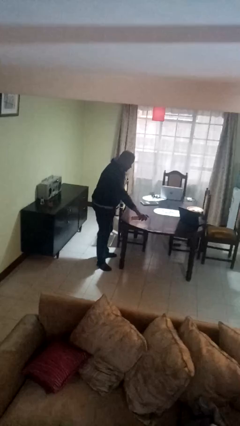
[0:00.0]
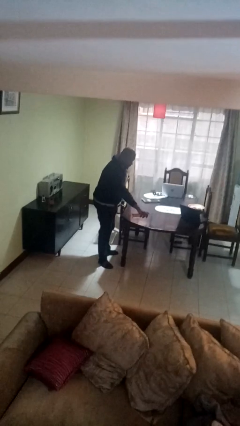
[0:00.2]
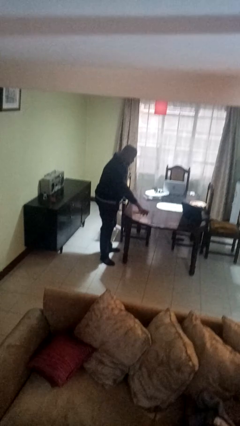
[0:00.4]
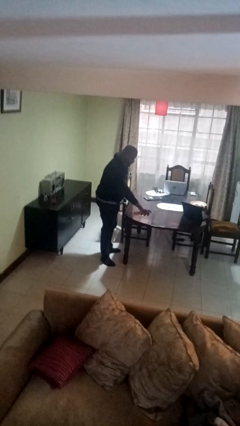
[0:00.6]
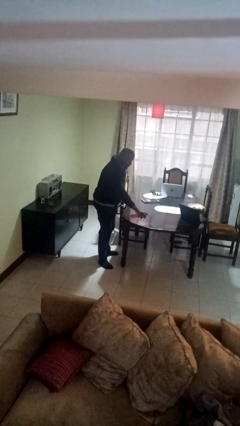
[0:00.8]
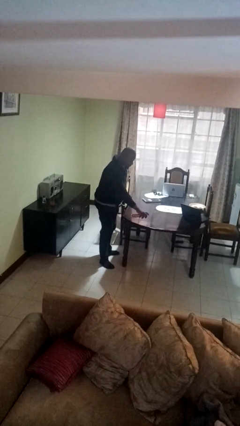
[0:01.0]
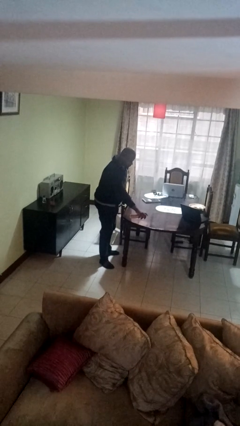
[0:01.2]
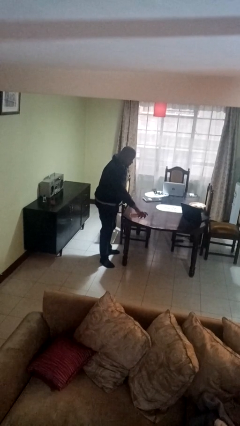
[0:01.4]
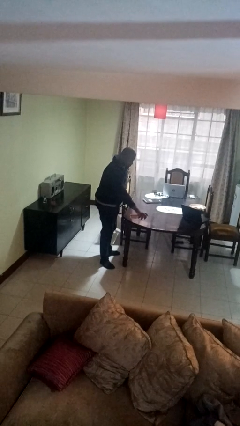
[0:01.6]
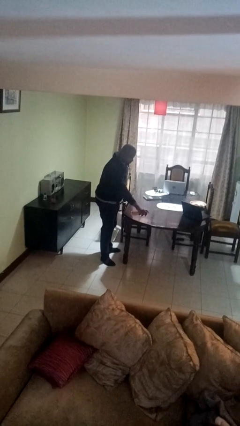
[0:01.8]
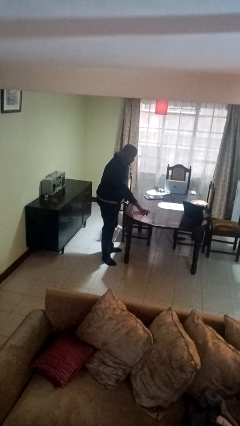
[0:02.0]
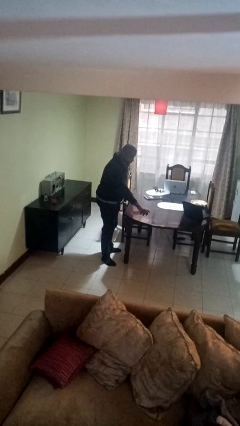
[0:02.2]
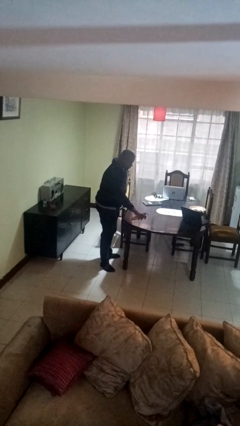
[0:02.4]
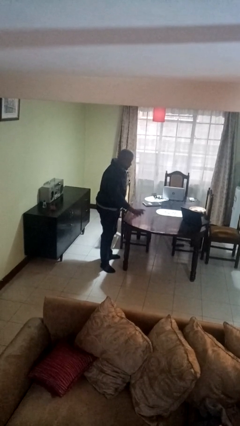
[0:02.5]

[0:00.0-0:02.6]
person sprays from bottle

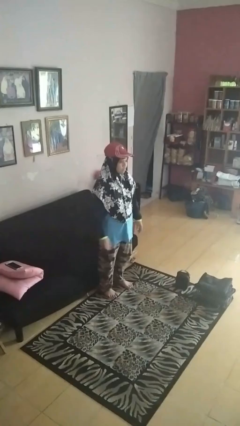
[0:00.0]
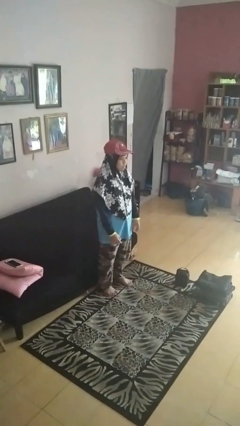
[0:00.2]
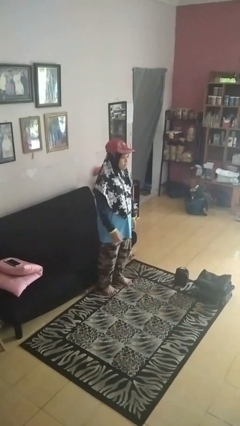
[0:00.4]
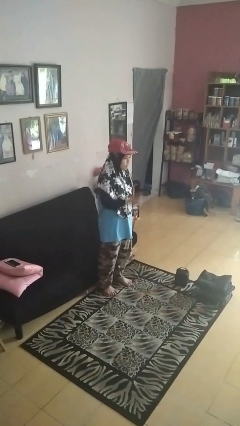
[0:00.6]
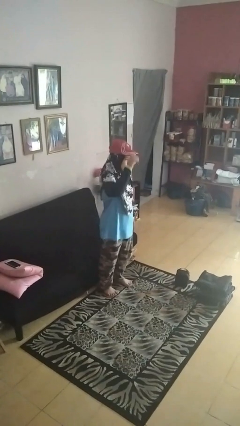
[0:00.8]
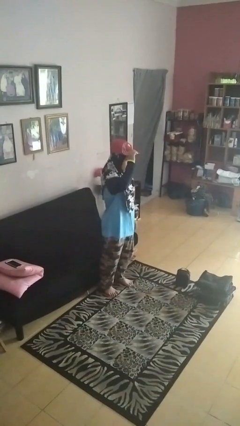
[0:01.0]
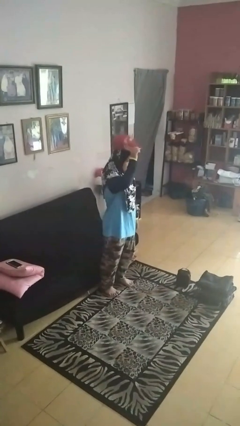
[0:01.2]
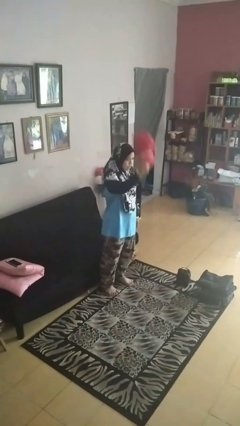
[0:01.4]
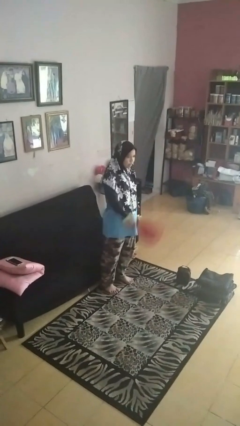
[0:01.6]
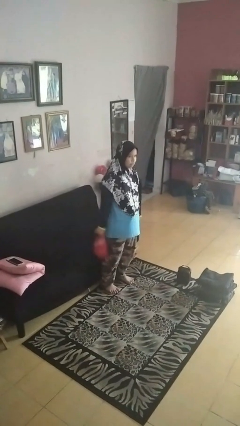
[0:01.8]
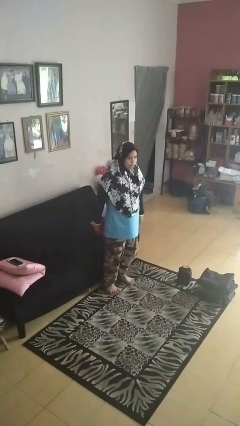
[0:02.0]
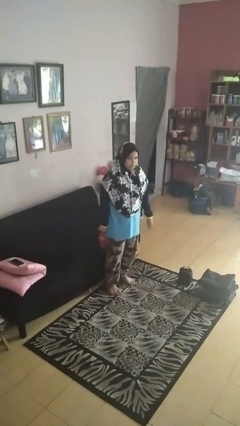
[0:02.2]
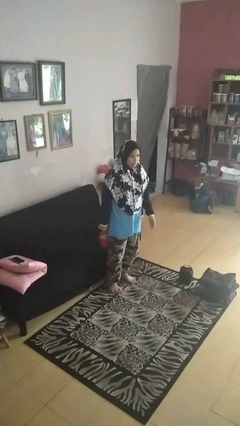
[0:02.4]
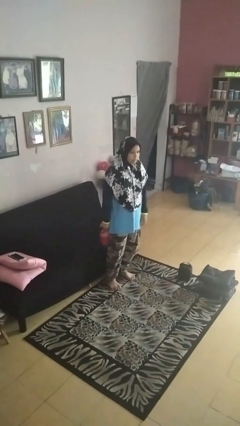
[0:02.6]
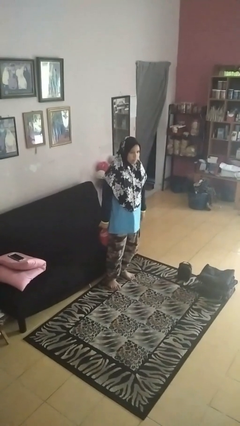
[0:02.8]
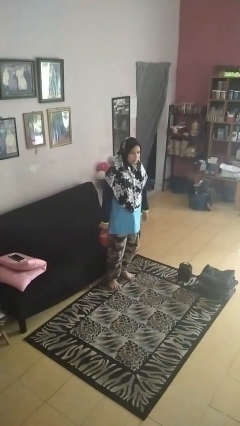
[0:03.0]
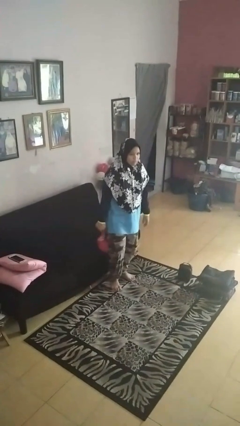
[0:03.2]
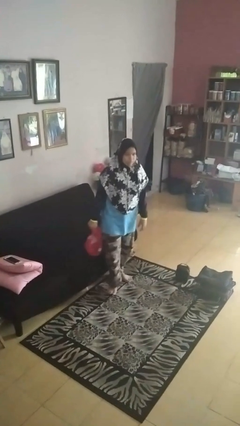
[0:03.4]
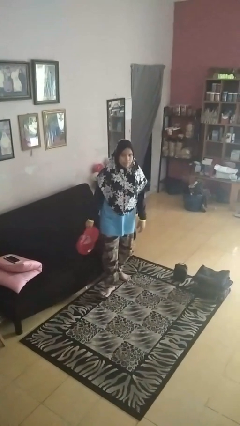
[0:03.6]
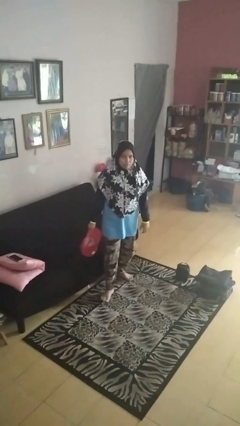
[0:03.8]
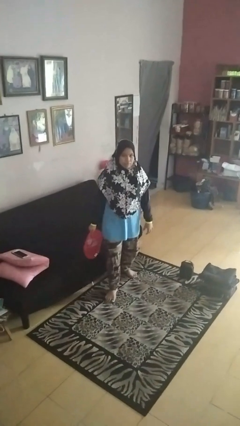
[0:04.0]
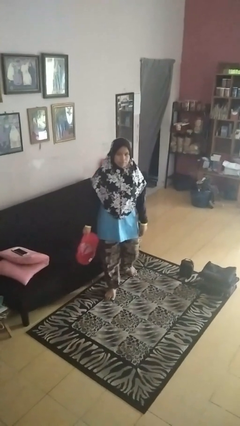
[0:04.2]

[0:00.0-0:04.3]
person takes off hat

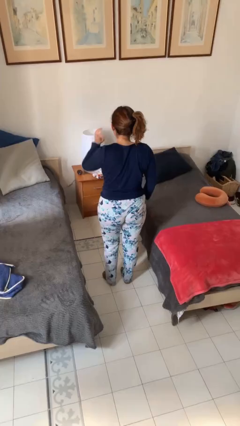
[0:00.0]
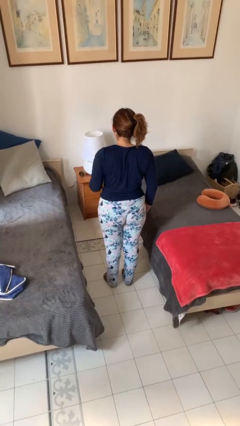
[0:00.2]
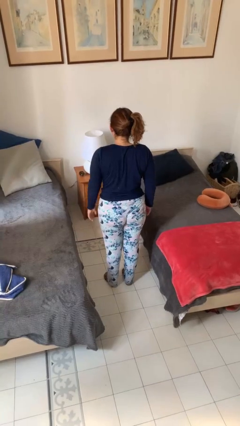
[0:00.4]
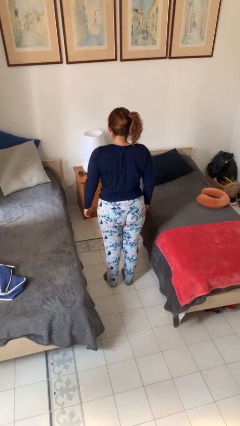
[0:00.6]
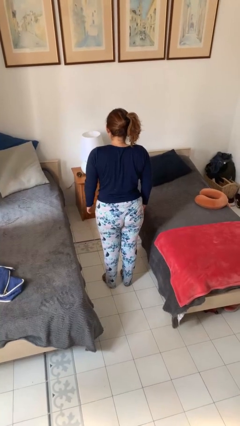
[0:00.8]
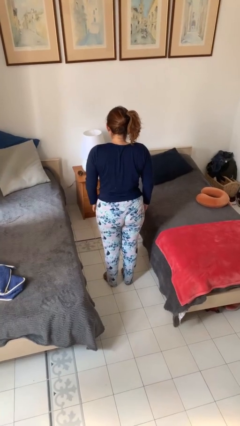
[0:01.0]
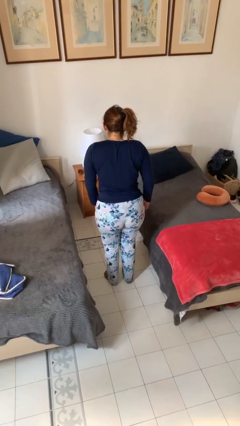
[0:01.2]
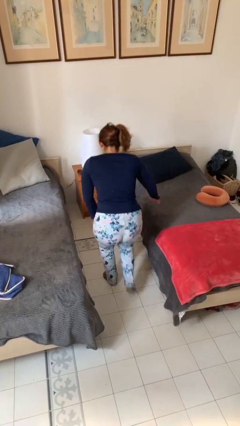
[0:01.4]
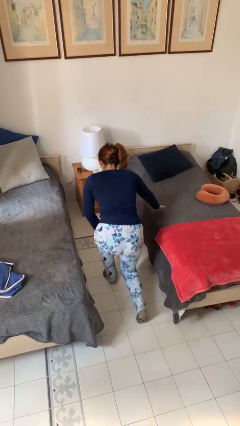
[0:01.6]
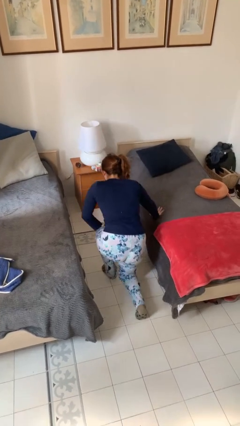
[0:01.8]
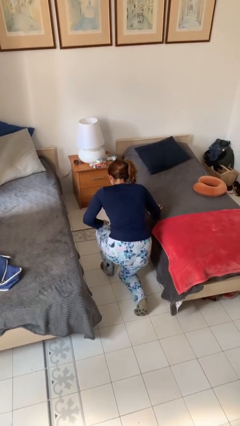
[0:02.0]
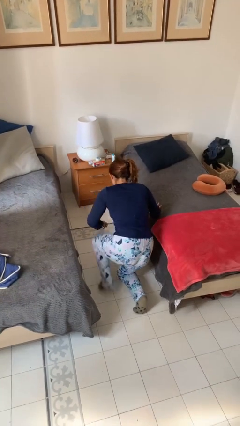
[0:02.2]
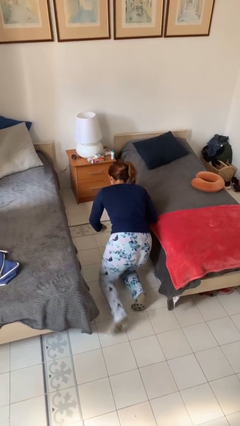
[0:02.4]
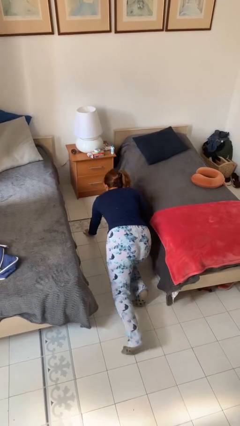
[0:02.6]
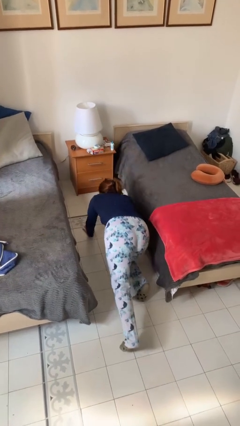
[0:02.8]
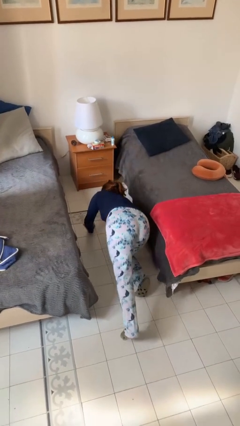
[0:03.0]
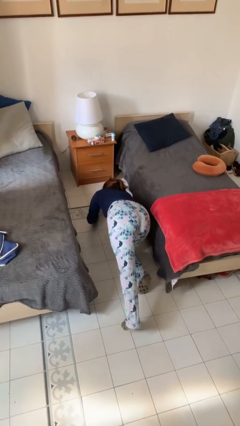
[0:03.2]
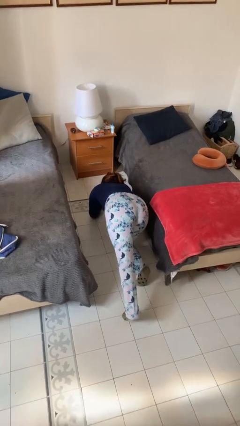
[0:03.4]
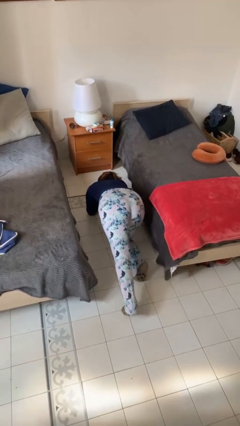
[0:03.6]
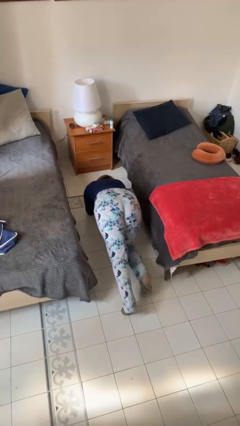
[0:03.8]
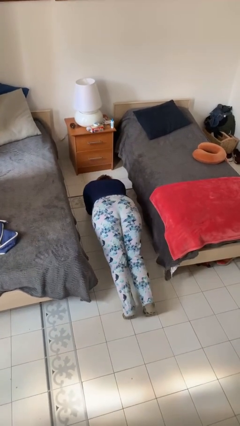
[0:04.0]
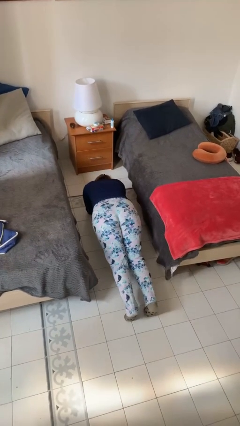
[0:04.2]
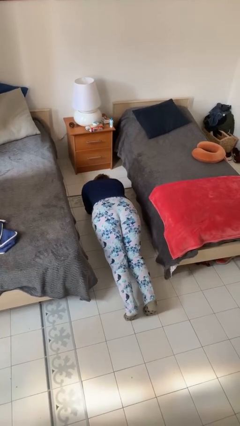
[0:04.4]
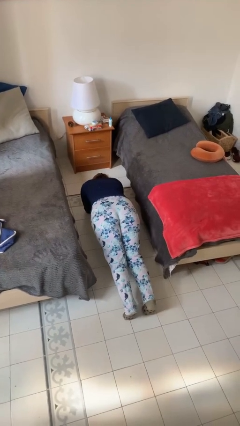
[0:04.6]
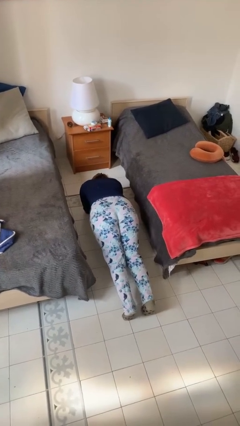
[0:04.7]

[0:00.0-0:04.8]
person exercises with plank

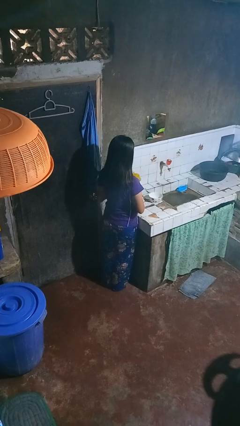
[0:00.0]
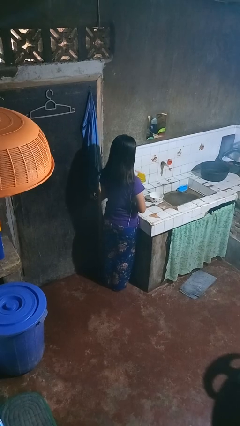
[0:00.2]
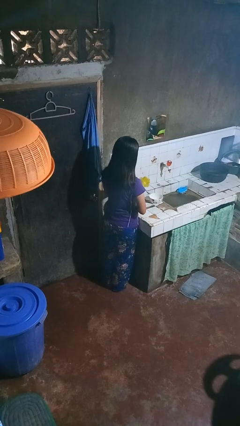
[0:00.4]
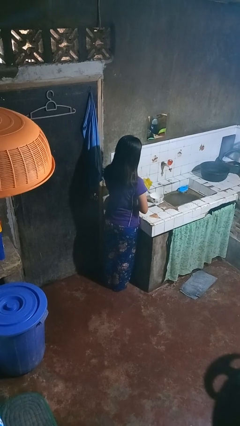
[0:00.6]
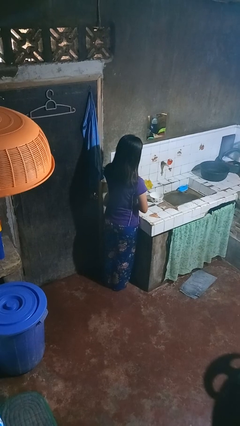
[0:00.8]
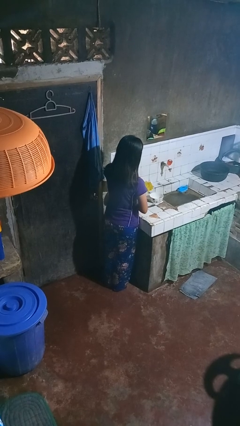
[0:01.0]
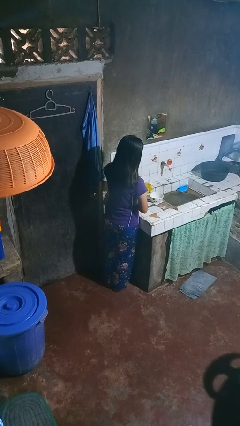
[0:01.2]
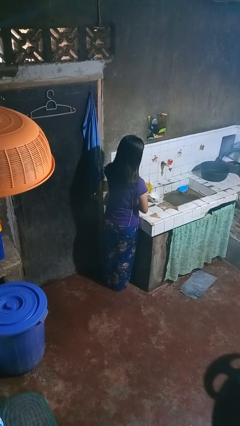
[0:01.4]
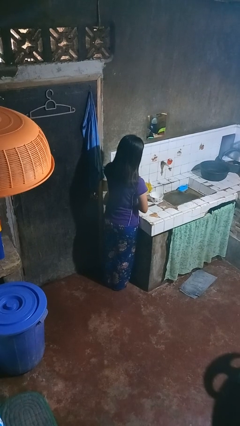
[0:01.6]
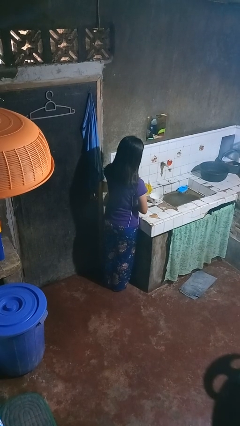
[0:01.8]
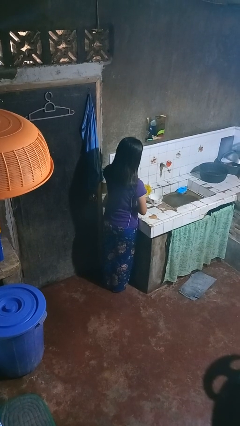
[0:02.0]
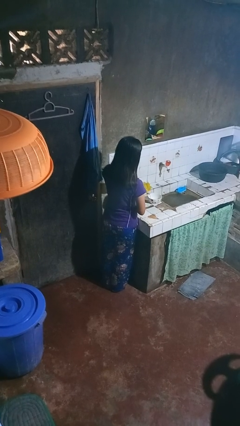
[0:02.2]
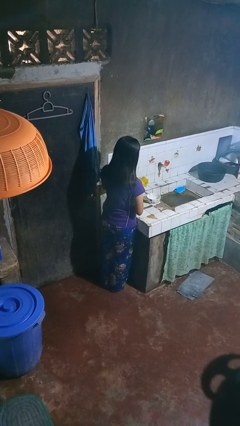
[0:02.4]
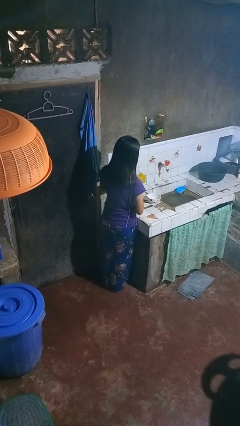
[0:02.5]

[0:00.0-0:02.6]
person pours into bowl

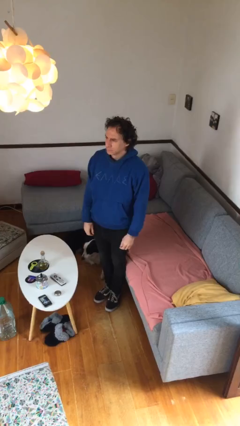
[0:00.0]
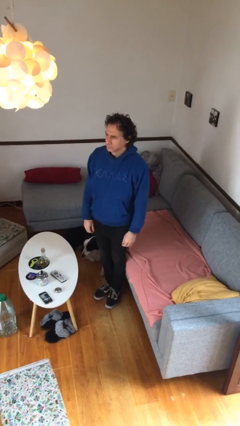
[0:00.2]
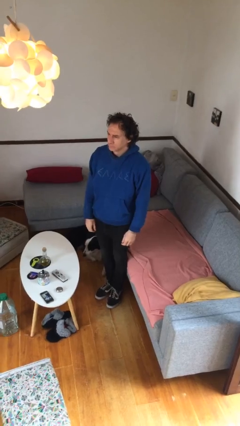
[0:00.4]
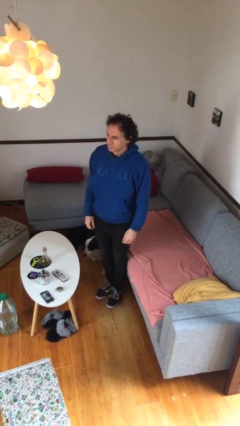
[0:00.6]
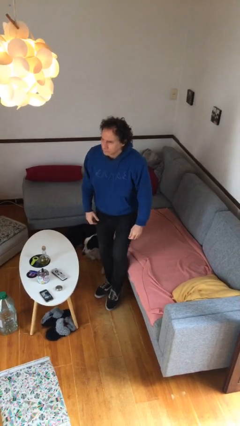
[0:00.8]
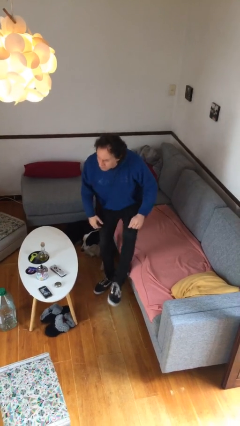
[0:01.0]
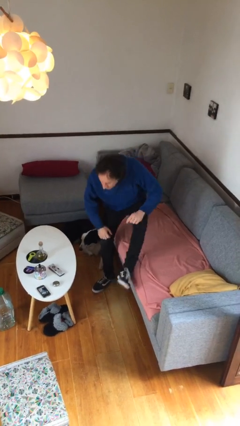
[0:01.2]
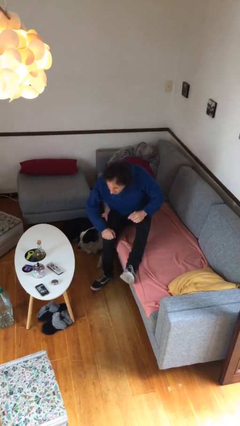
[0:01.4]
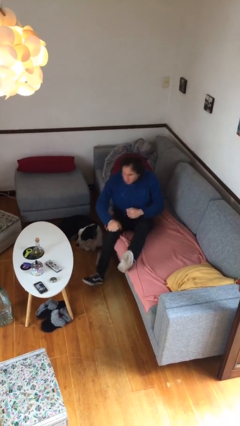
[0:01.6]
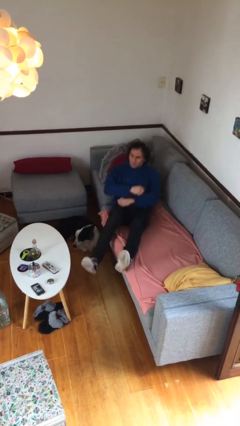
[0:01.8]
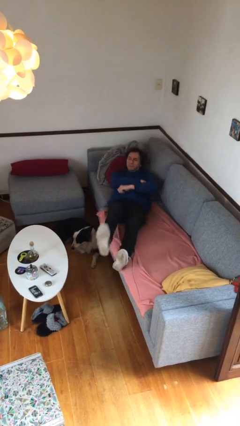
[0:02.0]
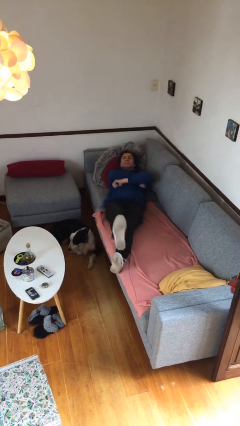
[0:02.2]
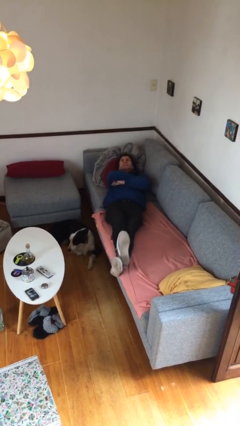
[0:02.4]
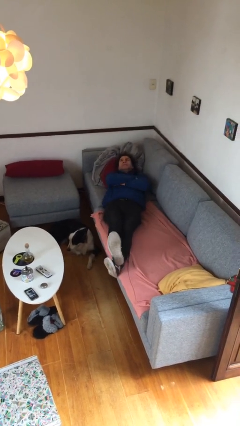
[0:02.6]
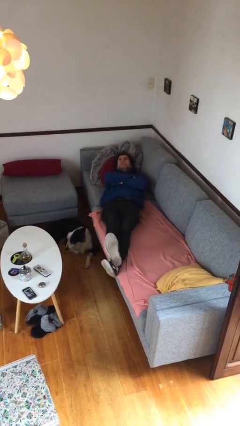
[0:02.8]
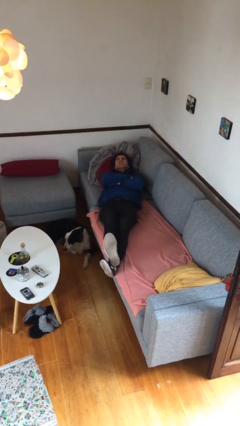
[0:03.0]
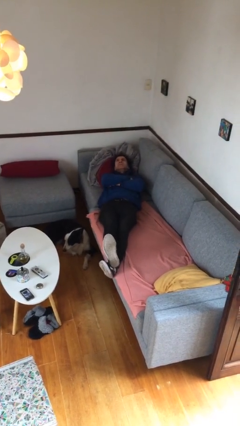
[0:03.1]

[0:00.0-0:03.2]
person lies down on couch
